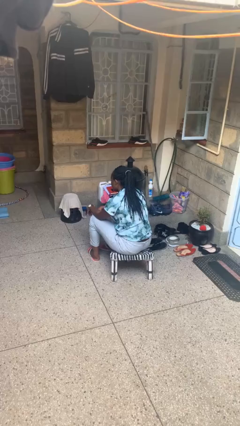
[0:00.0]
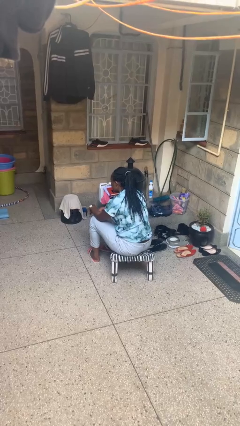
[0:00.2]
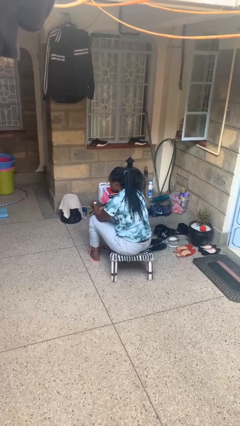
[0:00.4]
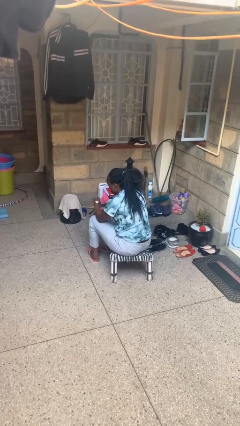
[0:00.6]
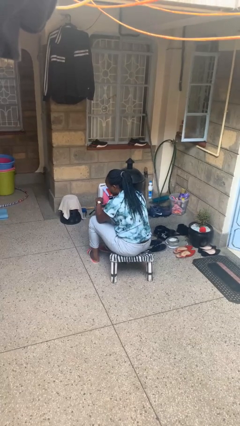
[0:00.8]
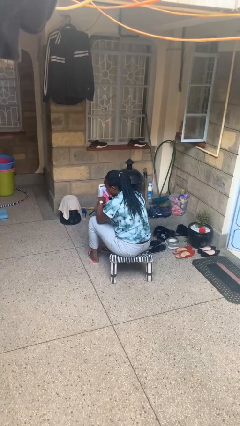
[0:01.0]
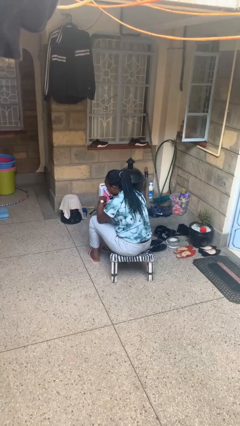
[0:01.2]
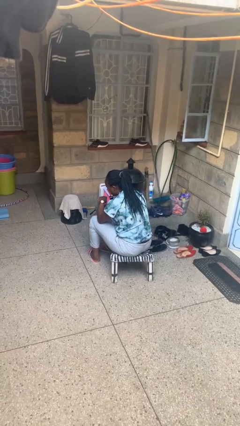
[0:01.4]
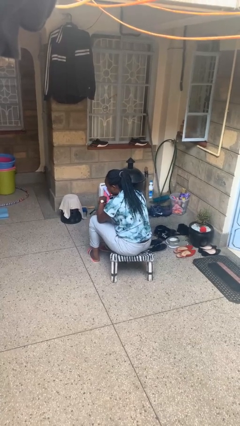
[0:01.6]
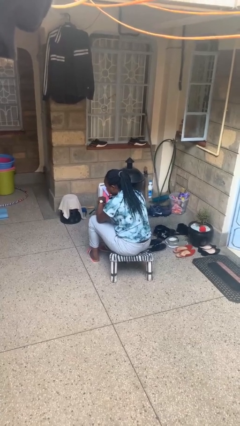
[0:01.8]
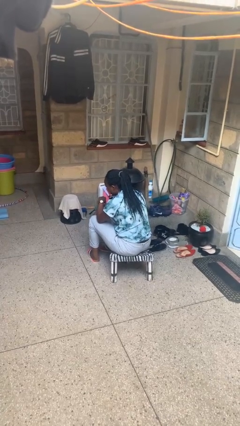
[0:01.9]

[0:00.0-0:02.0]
person looks at wristwatch

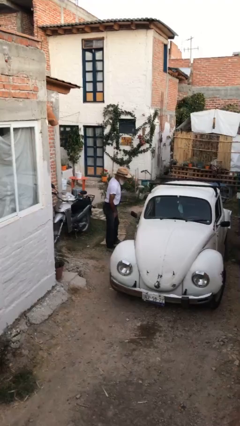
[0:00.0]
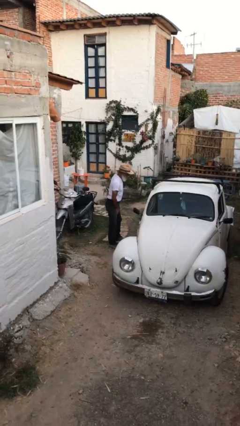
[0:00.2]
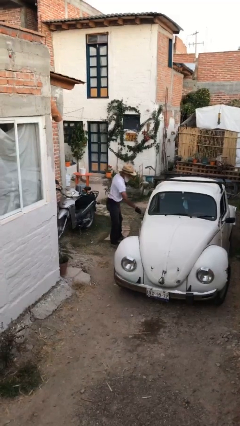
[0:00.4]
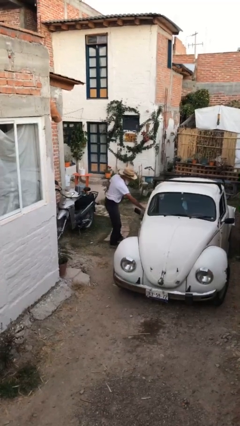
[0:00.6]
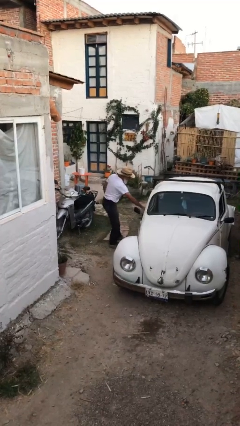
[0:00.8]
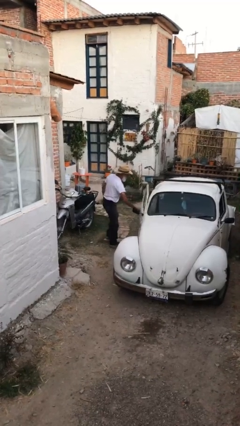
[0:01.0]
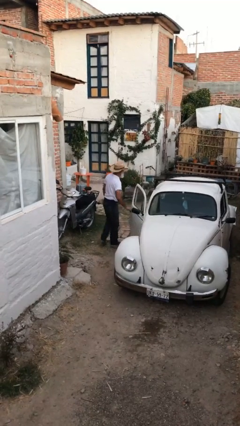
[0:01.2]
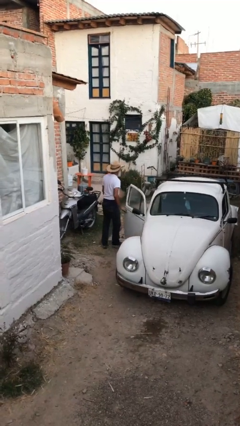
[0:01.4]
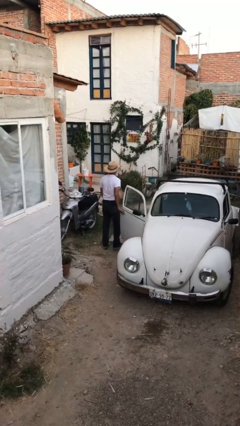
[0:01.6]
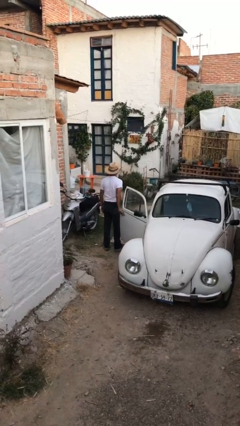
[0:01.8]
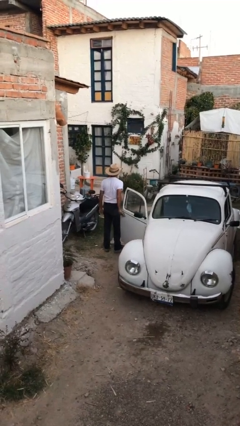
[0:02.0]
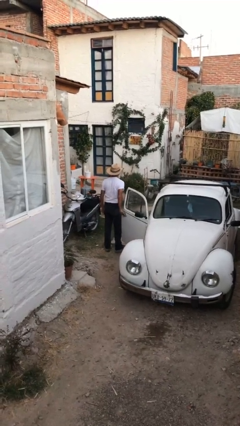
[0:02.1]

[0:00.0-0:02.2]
person opens car door

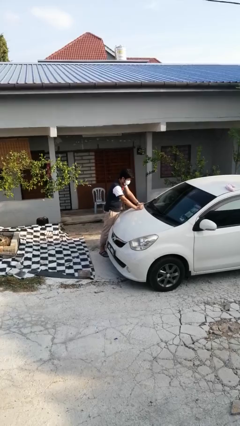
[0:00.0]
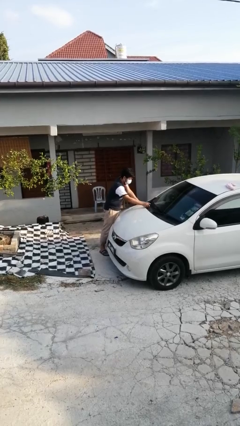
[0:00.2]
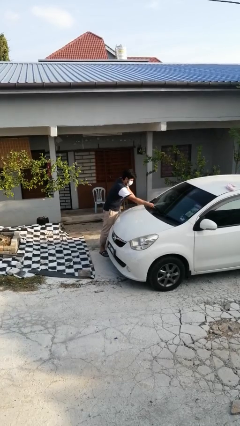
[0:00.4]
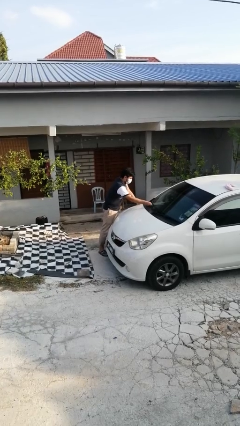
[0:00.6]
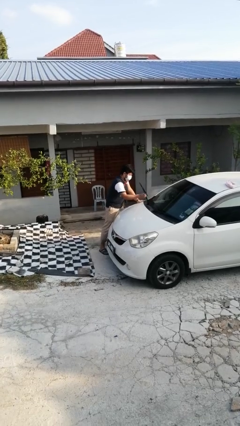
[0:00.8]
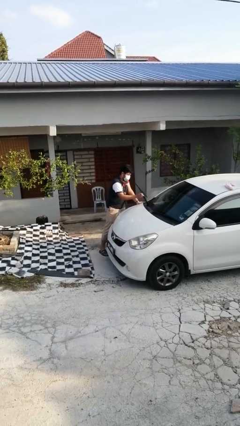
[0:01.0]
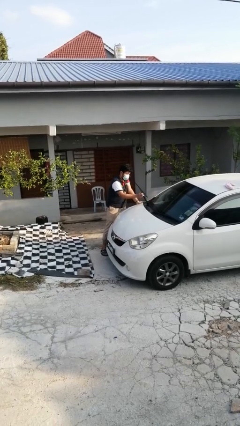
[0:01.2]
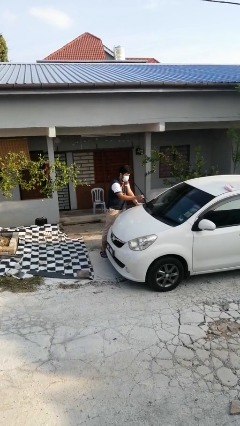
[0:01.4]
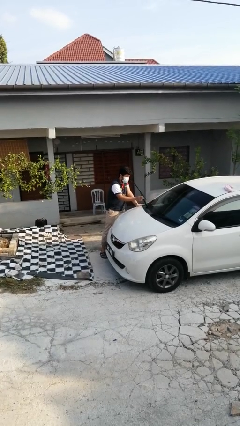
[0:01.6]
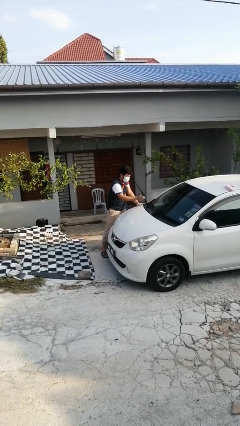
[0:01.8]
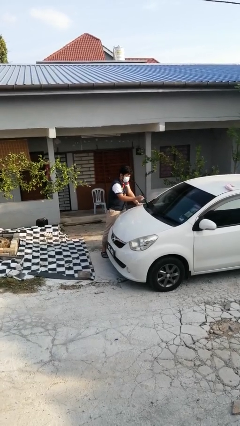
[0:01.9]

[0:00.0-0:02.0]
person flips up car wipers

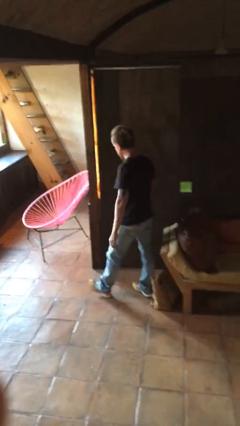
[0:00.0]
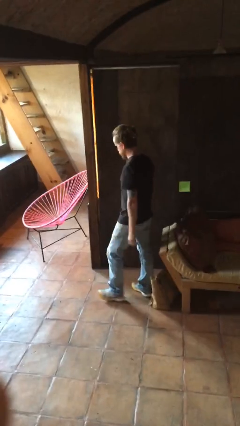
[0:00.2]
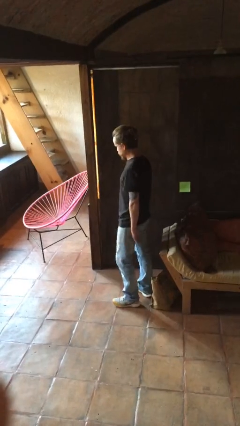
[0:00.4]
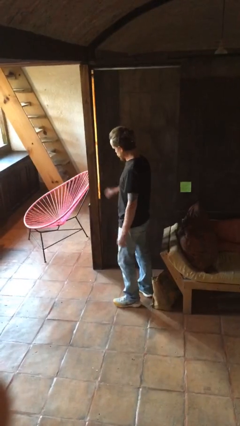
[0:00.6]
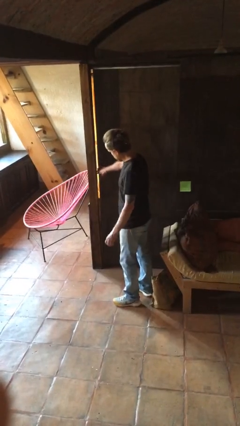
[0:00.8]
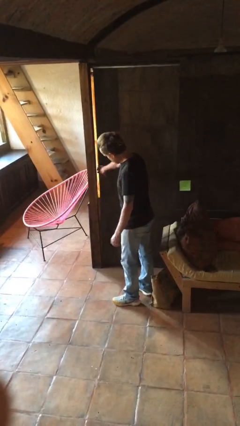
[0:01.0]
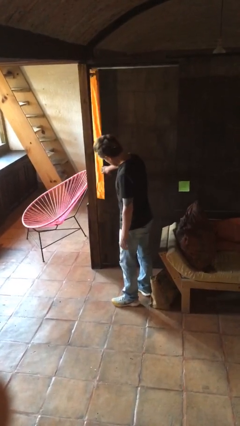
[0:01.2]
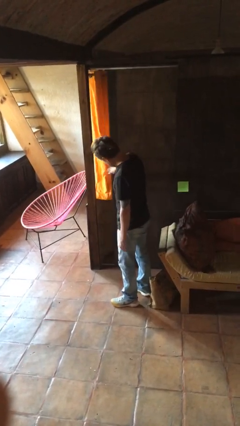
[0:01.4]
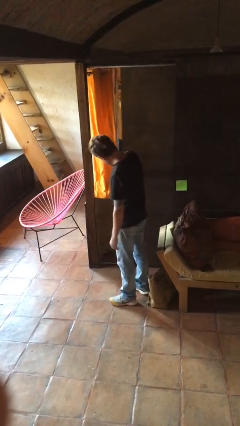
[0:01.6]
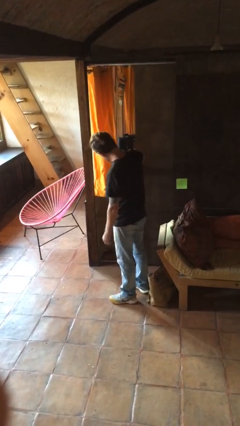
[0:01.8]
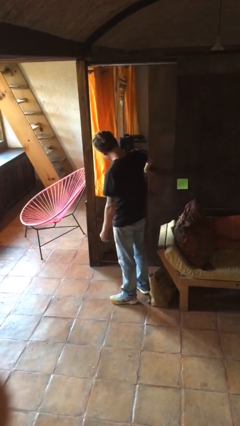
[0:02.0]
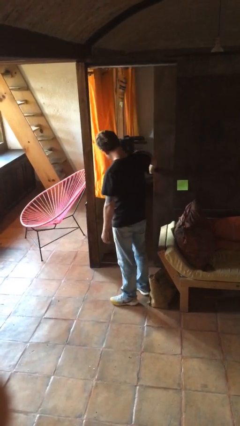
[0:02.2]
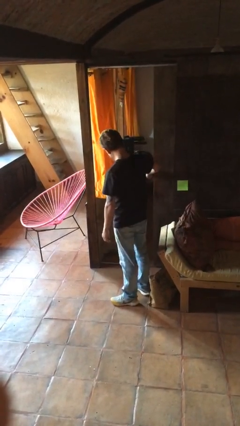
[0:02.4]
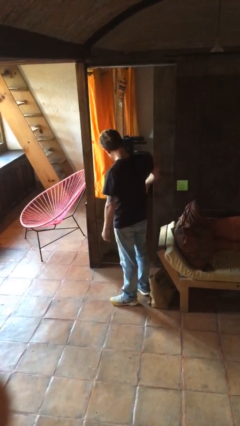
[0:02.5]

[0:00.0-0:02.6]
person opens sliding door

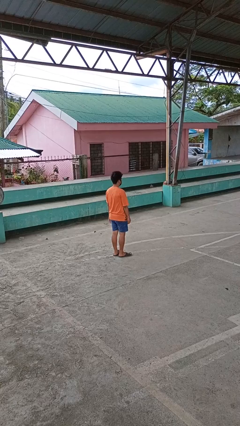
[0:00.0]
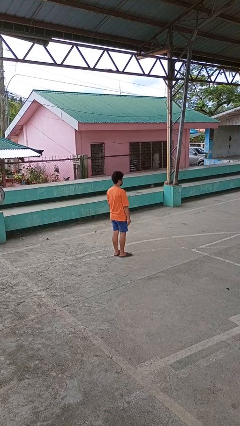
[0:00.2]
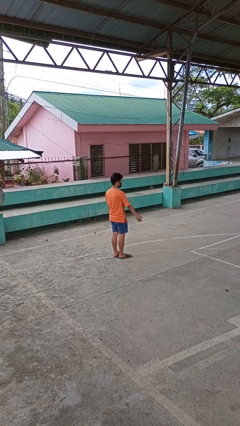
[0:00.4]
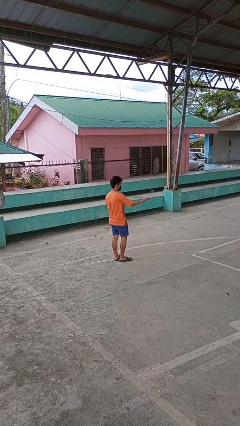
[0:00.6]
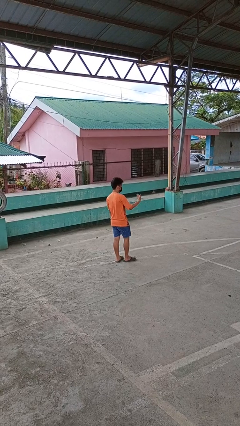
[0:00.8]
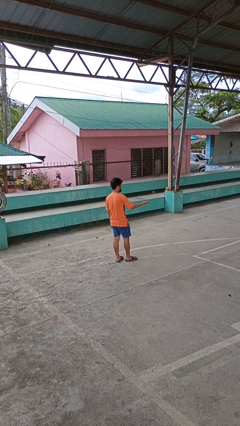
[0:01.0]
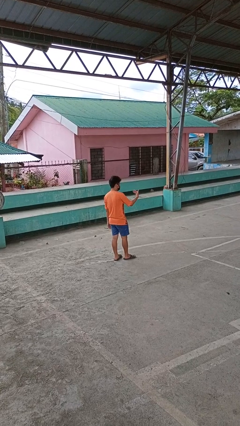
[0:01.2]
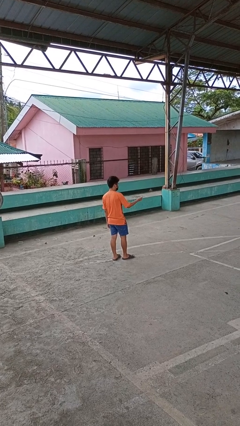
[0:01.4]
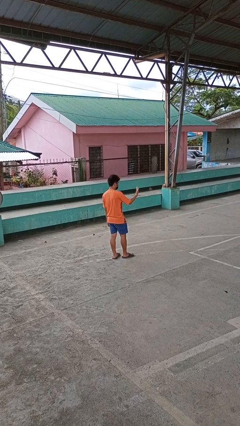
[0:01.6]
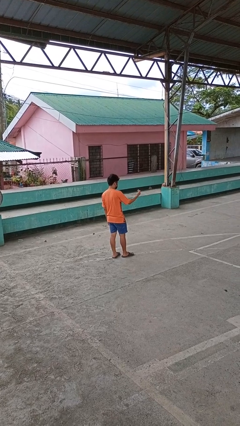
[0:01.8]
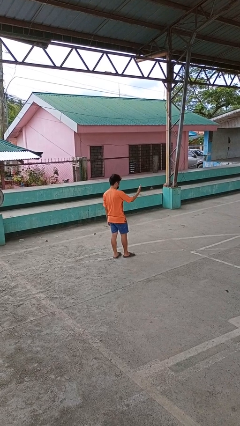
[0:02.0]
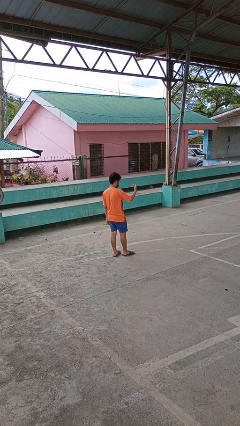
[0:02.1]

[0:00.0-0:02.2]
person gestures come here

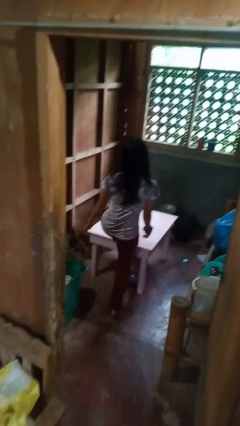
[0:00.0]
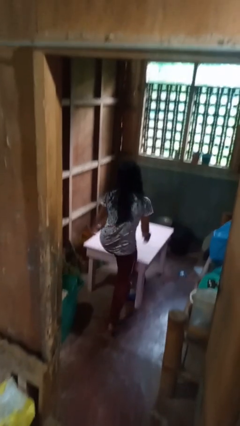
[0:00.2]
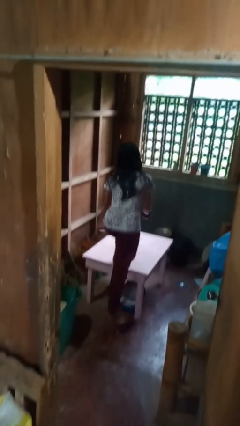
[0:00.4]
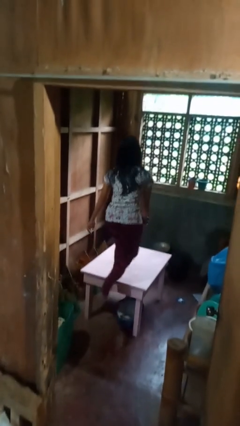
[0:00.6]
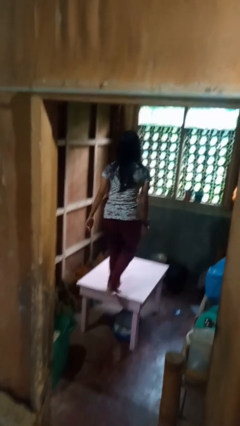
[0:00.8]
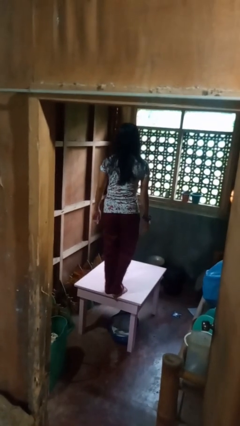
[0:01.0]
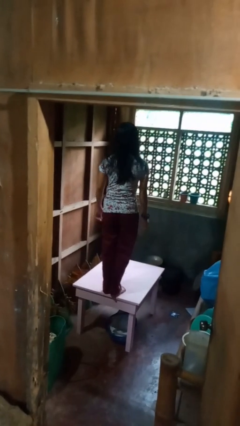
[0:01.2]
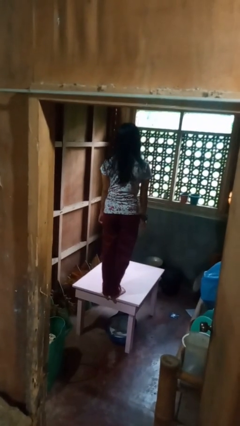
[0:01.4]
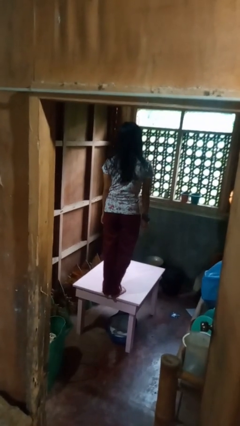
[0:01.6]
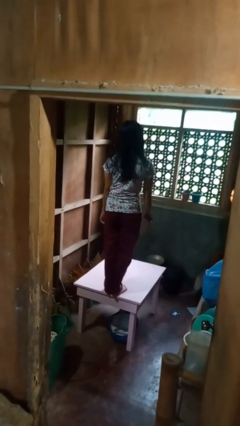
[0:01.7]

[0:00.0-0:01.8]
person climbs on table

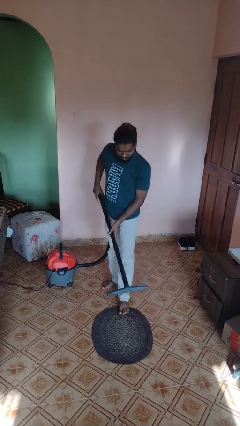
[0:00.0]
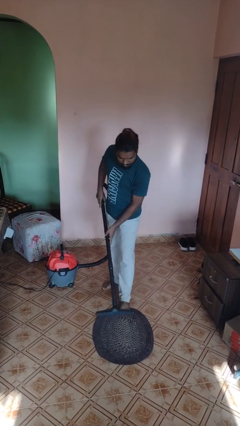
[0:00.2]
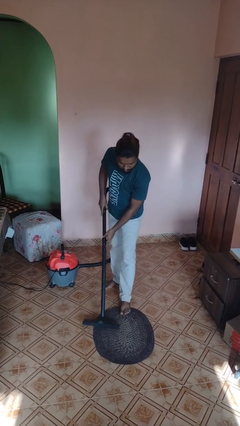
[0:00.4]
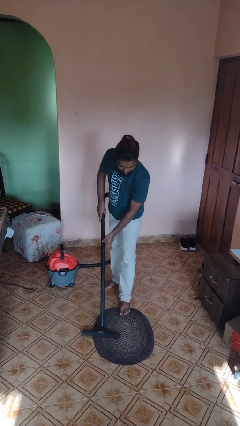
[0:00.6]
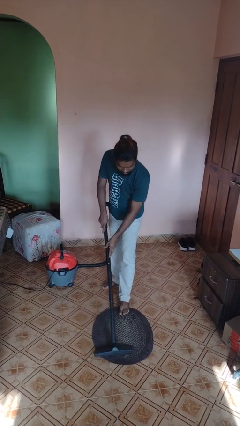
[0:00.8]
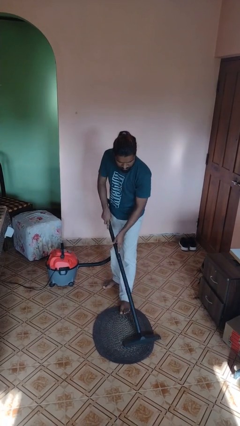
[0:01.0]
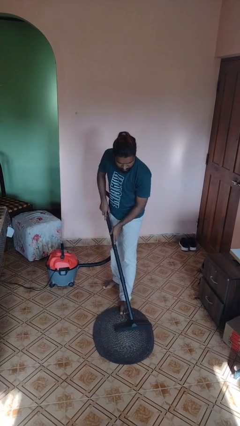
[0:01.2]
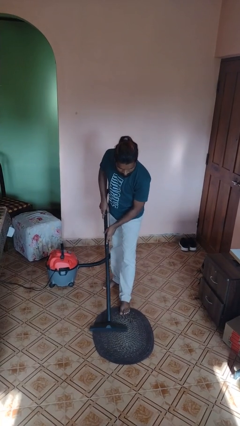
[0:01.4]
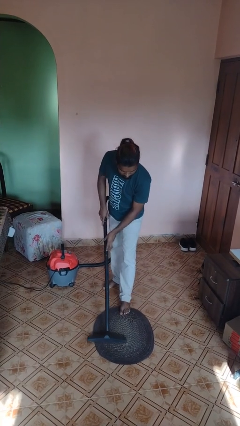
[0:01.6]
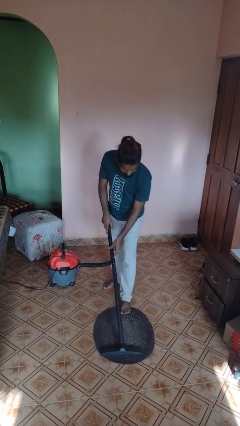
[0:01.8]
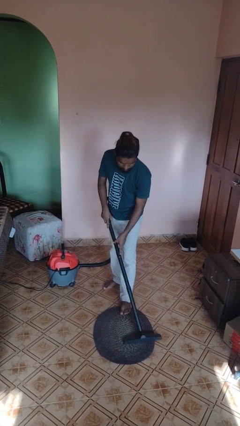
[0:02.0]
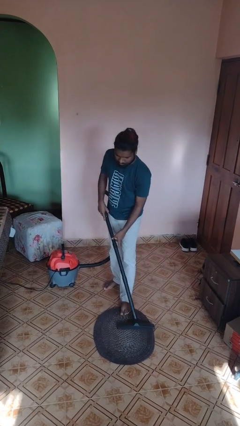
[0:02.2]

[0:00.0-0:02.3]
person vacuums carpet

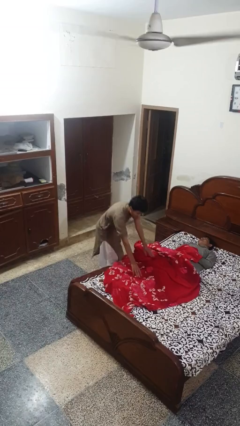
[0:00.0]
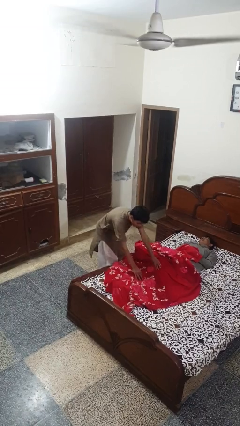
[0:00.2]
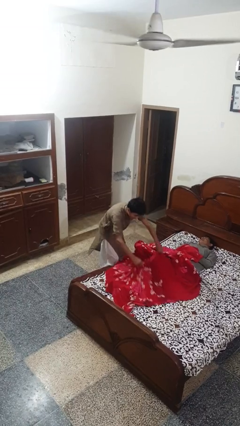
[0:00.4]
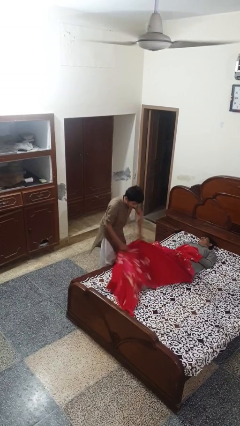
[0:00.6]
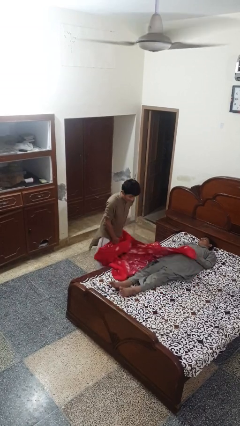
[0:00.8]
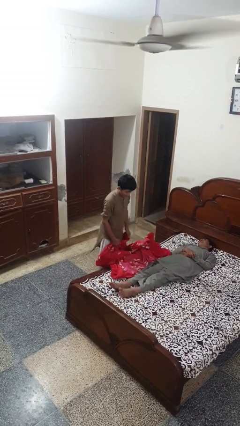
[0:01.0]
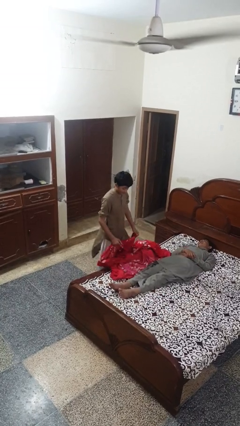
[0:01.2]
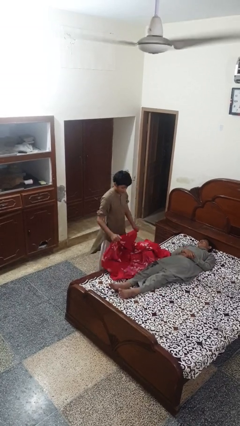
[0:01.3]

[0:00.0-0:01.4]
person uncovers friend with blanket

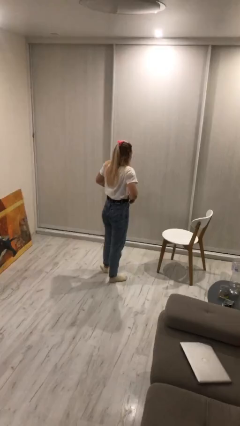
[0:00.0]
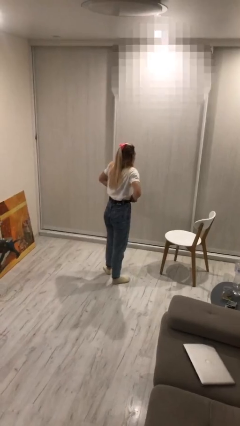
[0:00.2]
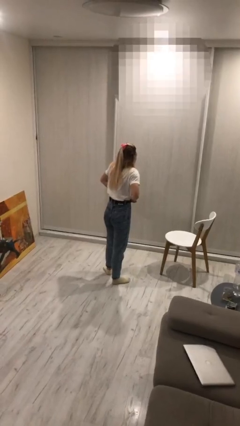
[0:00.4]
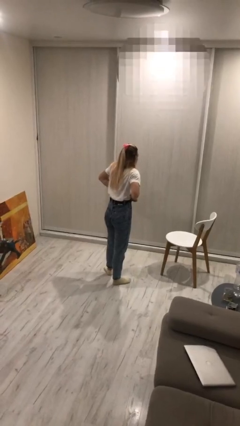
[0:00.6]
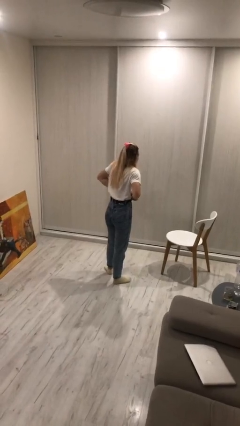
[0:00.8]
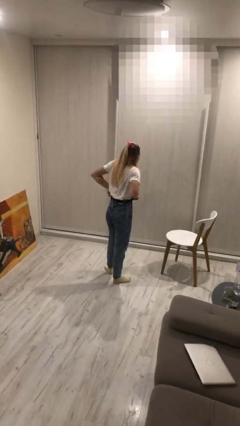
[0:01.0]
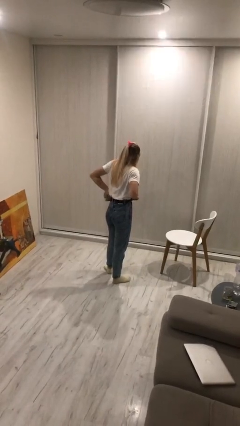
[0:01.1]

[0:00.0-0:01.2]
person hikes up pants
